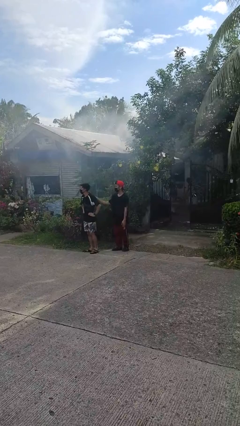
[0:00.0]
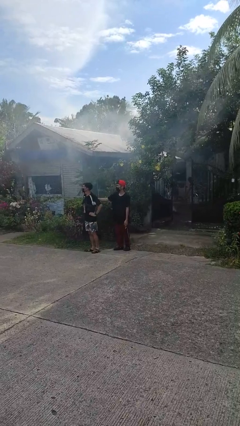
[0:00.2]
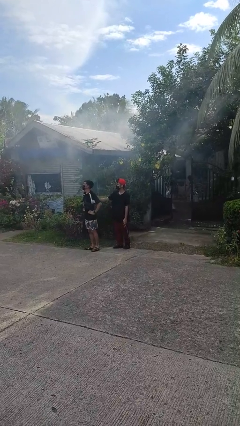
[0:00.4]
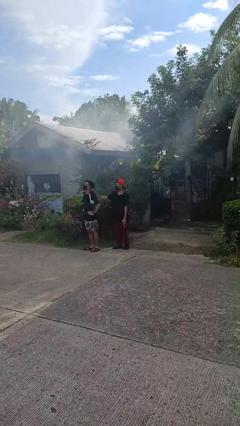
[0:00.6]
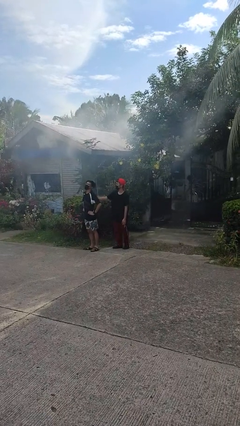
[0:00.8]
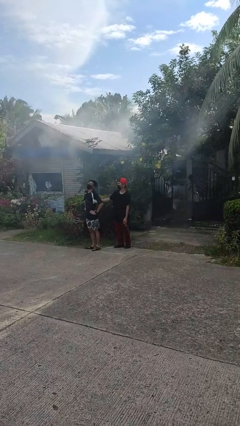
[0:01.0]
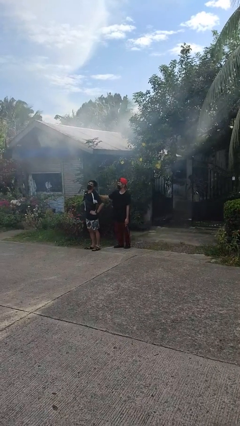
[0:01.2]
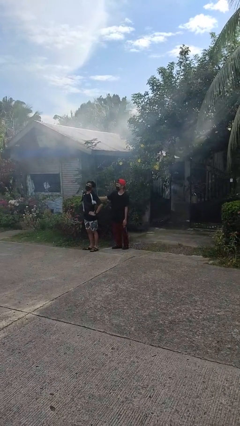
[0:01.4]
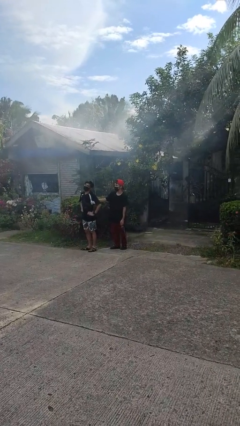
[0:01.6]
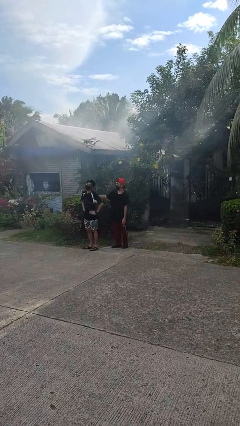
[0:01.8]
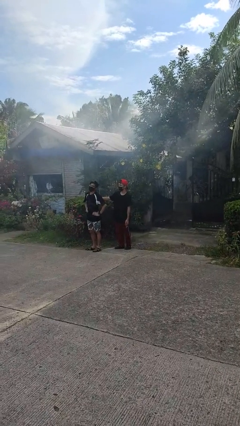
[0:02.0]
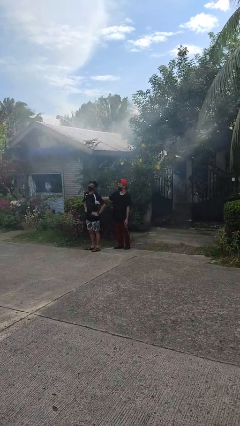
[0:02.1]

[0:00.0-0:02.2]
person touches back of person

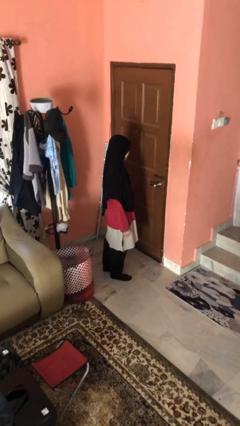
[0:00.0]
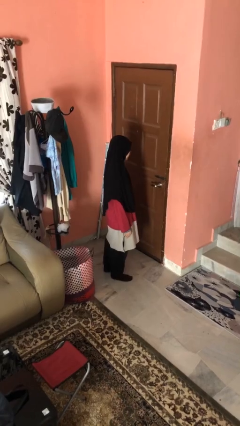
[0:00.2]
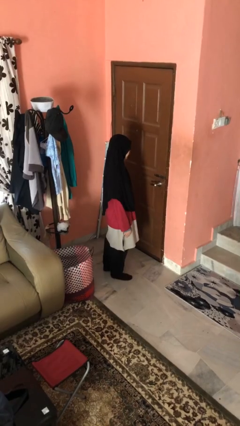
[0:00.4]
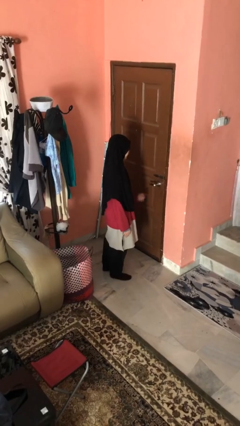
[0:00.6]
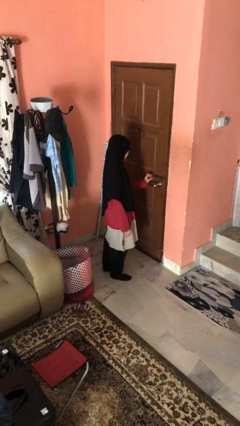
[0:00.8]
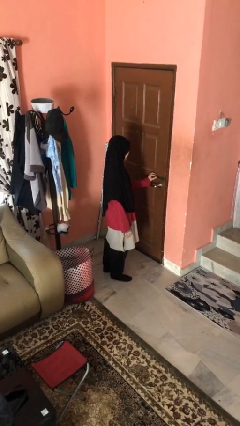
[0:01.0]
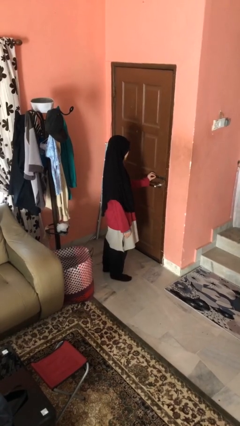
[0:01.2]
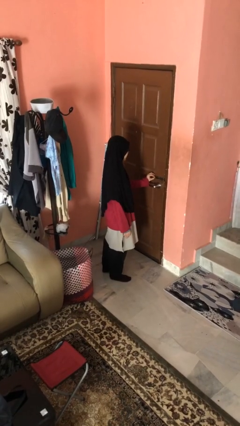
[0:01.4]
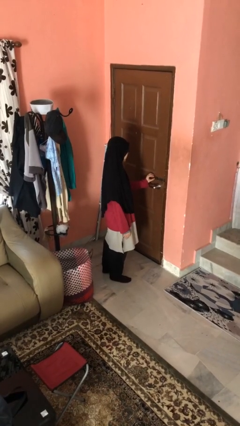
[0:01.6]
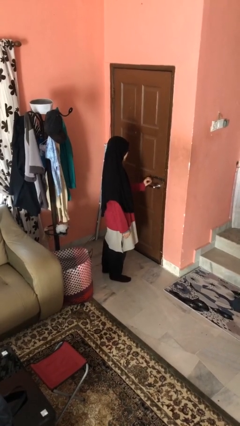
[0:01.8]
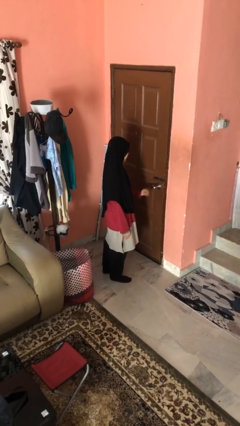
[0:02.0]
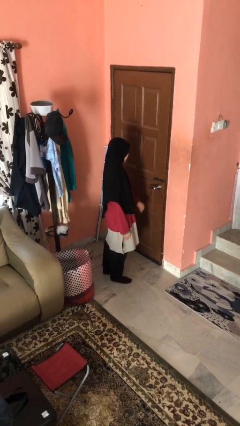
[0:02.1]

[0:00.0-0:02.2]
person unlocks door with keys

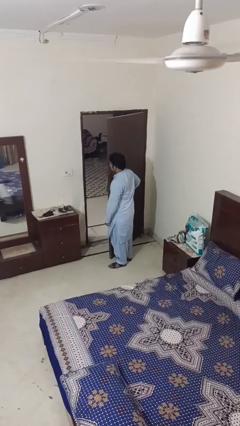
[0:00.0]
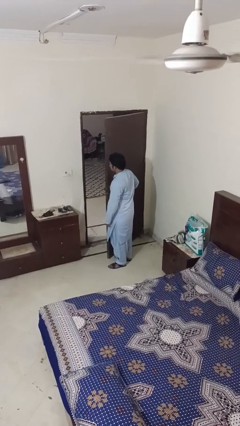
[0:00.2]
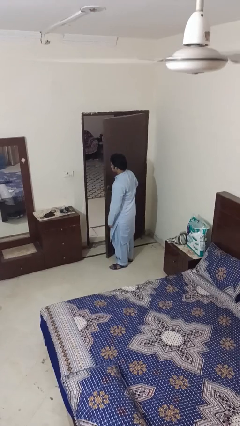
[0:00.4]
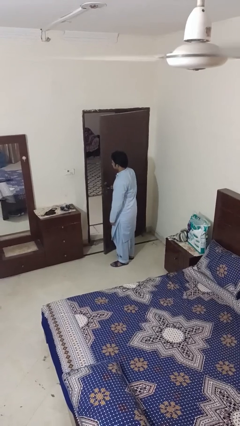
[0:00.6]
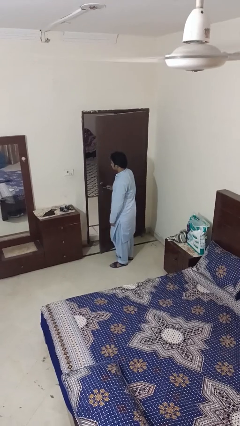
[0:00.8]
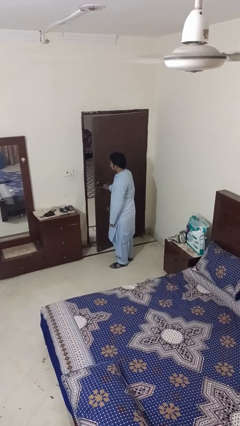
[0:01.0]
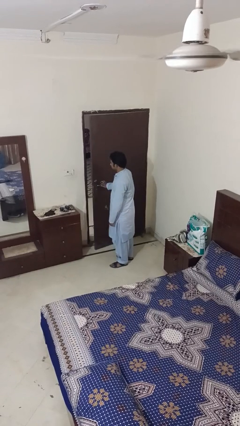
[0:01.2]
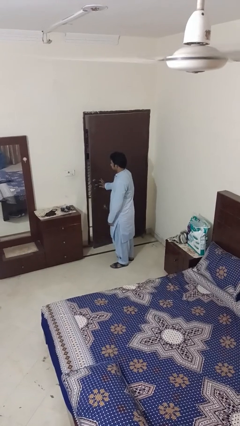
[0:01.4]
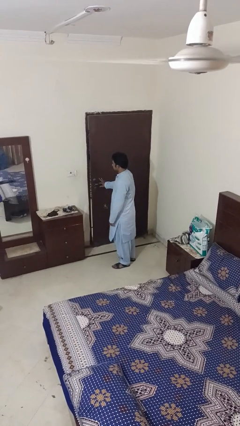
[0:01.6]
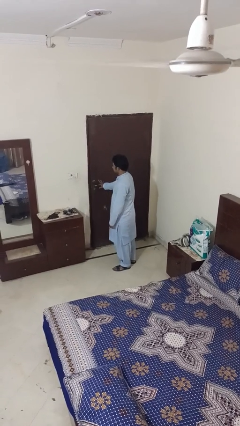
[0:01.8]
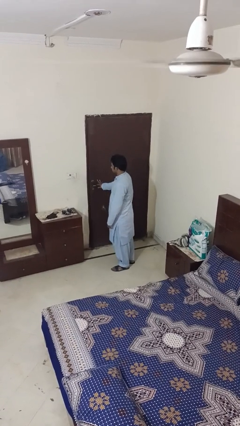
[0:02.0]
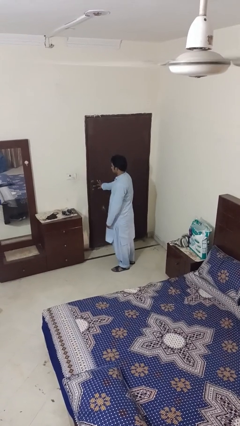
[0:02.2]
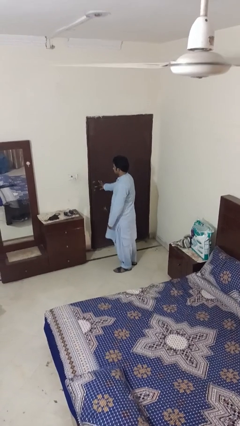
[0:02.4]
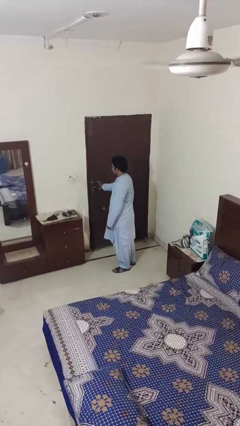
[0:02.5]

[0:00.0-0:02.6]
person closes facility door

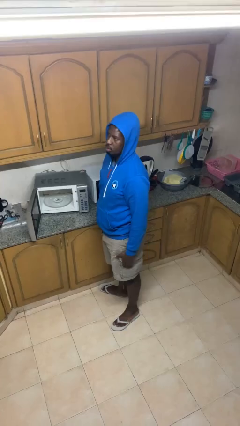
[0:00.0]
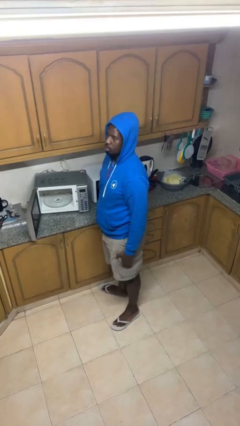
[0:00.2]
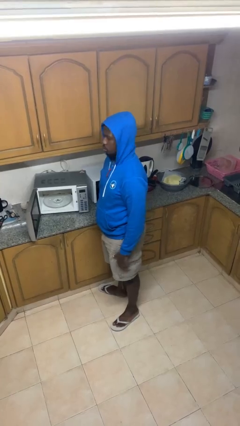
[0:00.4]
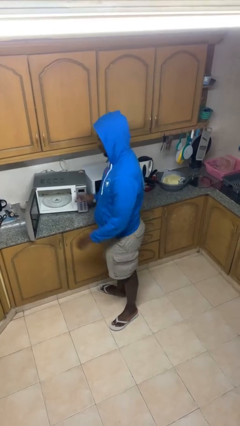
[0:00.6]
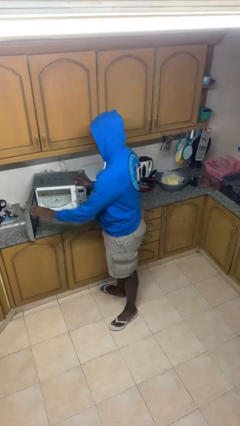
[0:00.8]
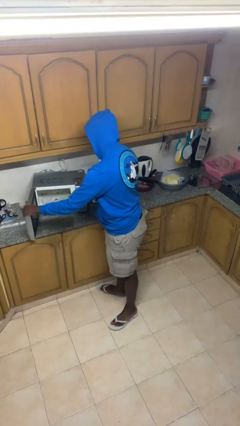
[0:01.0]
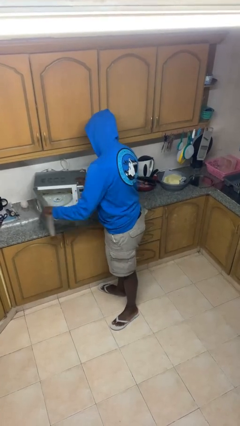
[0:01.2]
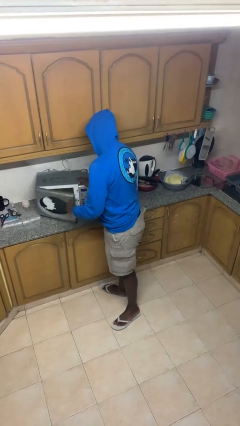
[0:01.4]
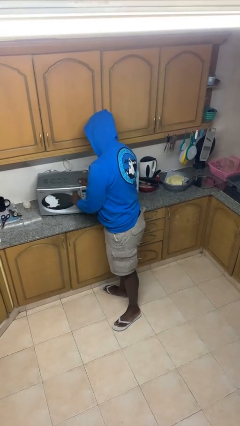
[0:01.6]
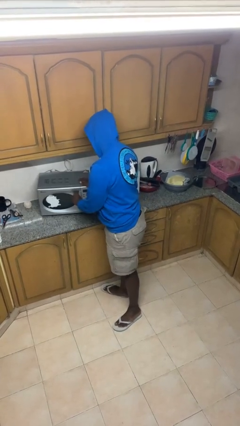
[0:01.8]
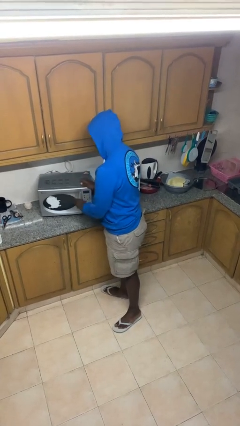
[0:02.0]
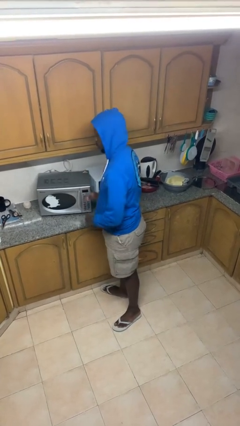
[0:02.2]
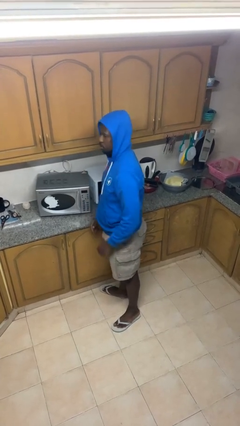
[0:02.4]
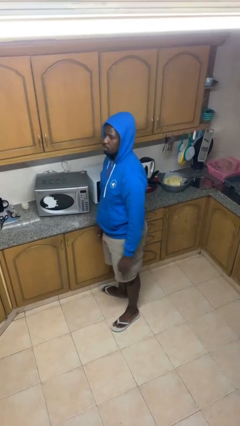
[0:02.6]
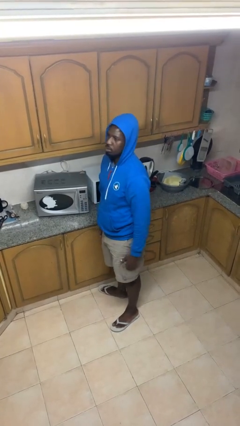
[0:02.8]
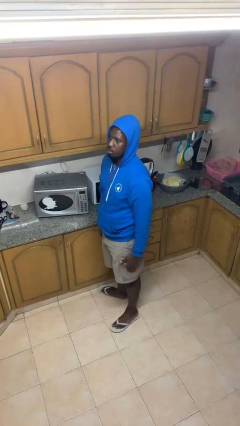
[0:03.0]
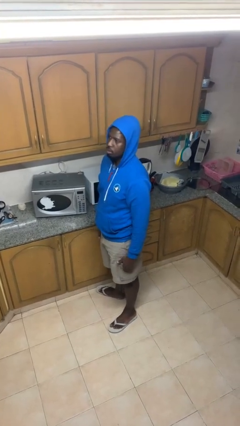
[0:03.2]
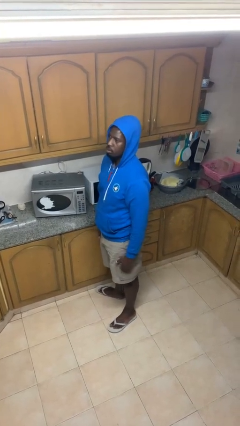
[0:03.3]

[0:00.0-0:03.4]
person closes microwave

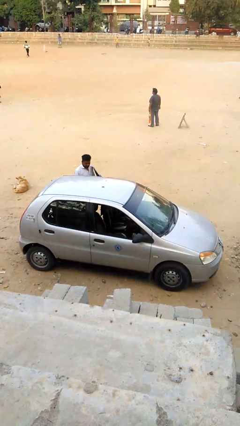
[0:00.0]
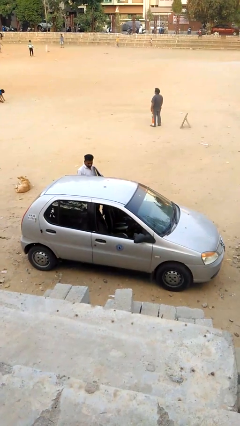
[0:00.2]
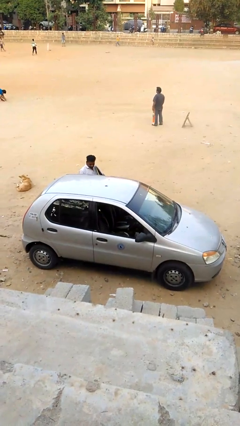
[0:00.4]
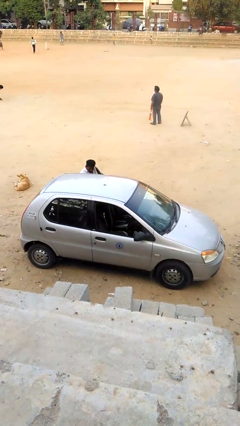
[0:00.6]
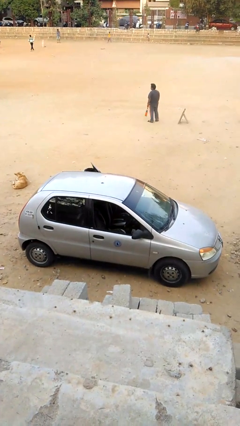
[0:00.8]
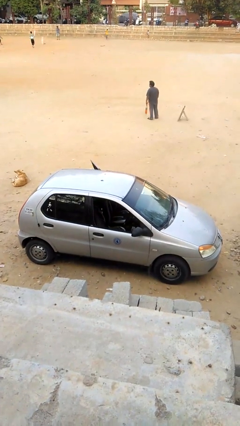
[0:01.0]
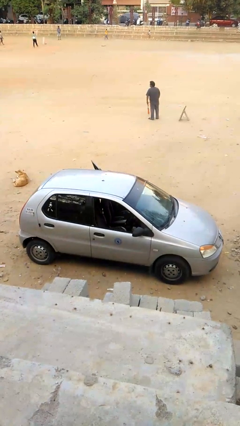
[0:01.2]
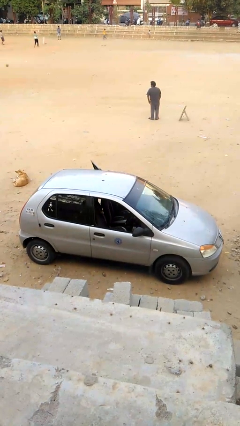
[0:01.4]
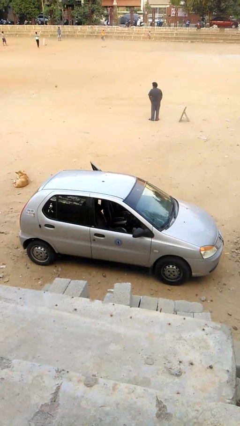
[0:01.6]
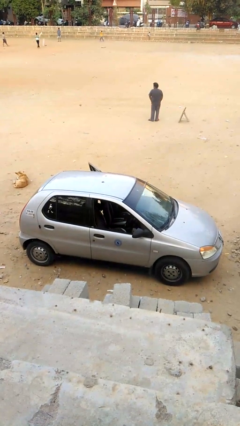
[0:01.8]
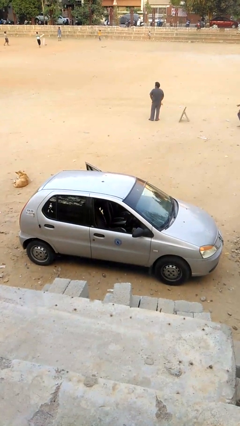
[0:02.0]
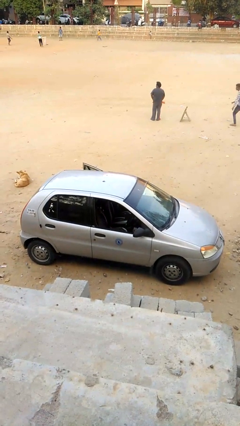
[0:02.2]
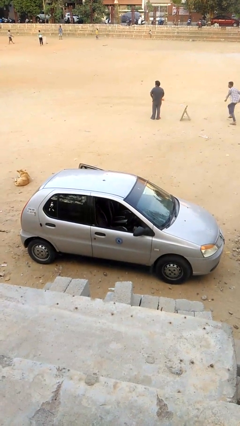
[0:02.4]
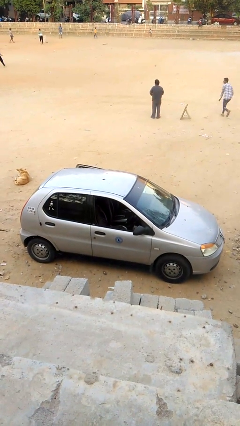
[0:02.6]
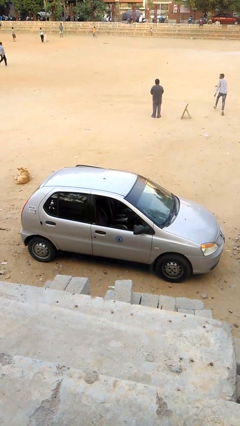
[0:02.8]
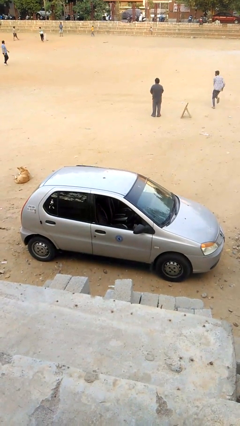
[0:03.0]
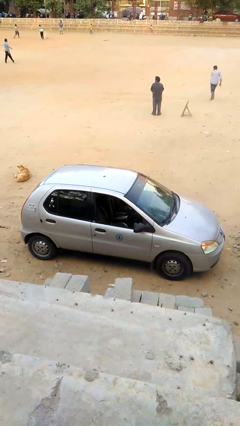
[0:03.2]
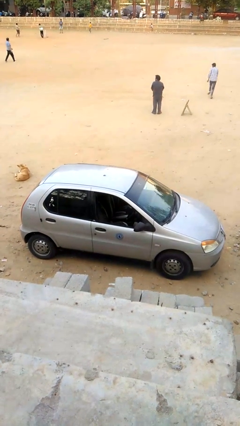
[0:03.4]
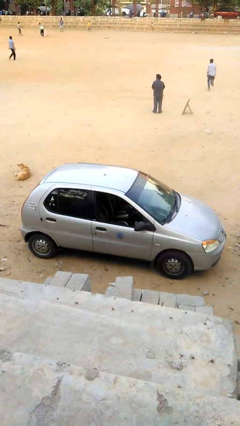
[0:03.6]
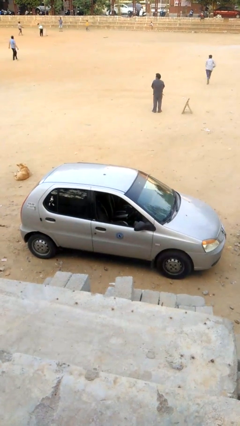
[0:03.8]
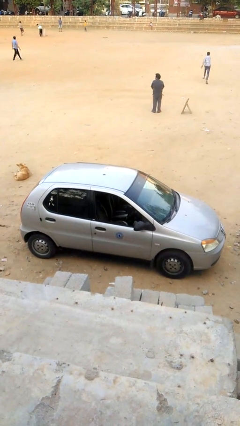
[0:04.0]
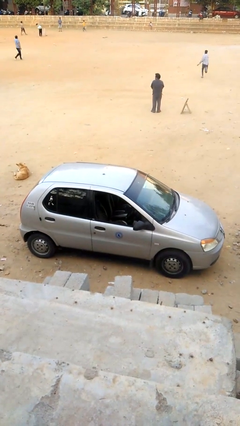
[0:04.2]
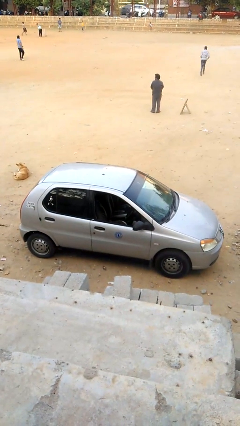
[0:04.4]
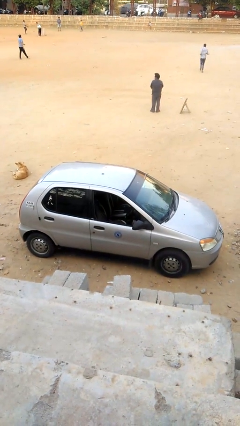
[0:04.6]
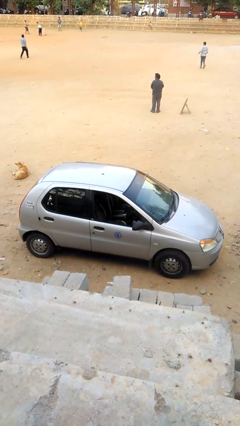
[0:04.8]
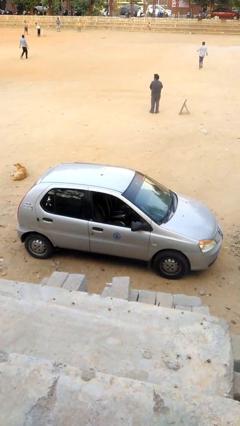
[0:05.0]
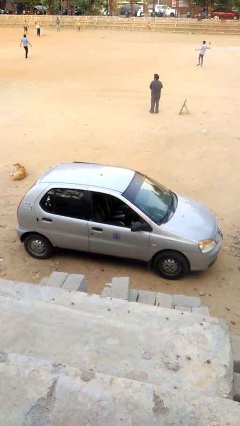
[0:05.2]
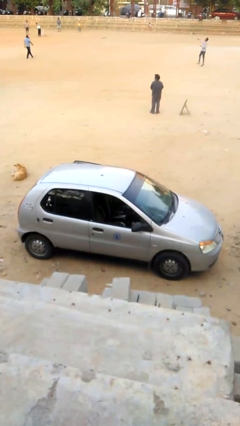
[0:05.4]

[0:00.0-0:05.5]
car picks up person

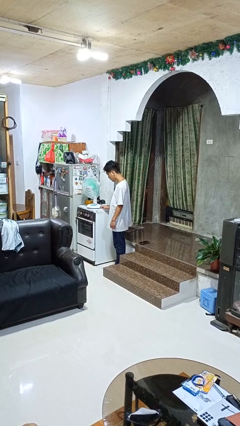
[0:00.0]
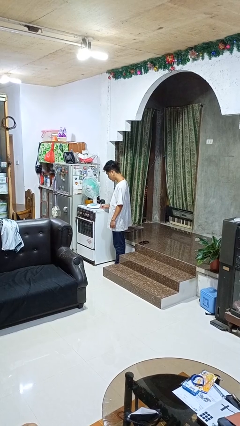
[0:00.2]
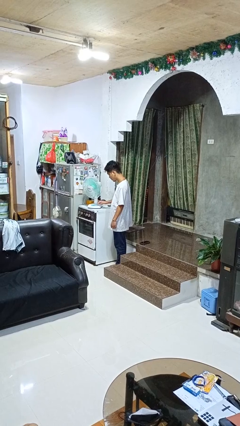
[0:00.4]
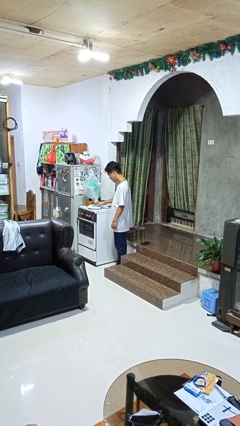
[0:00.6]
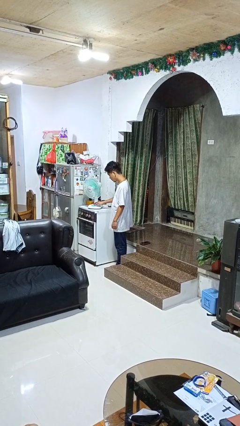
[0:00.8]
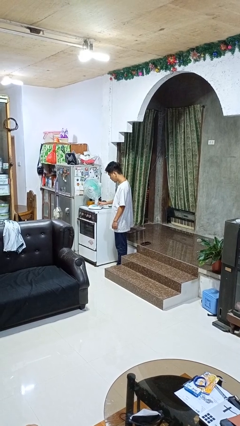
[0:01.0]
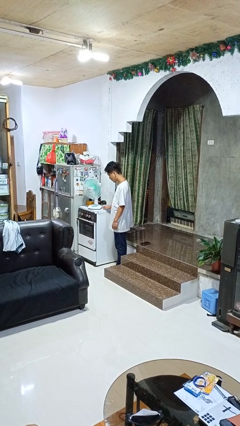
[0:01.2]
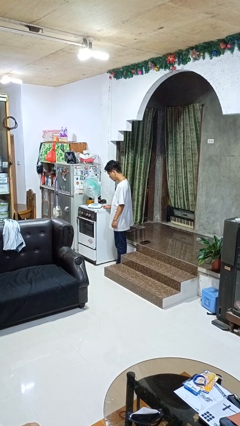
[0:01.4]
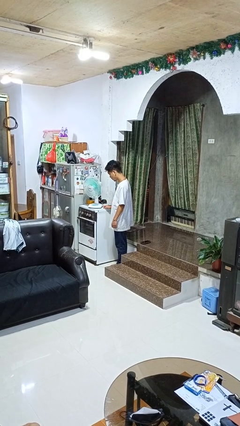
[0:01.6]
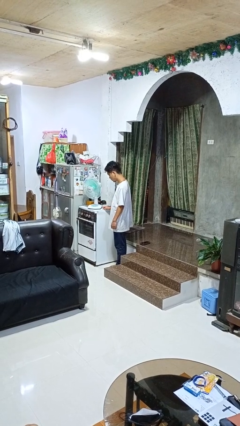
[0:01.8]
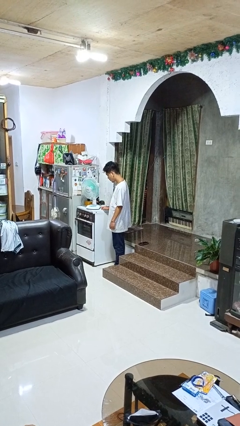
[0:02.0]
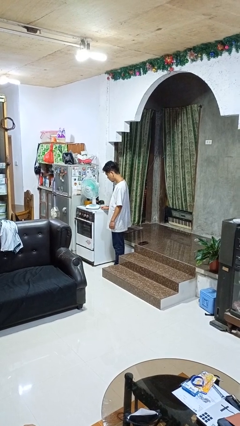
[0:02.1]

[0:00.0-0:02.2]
person turns on fan
